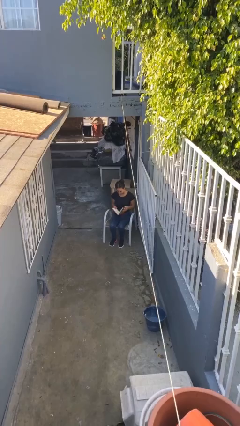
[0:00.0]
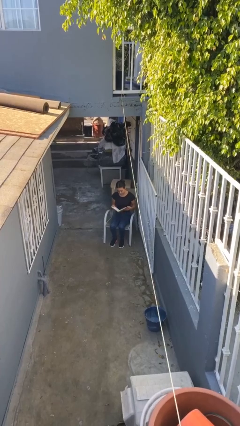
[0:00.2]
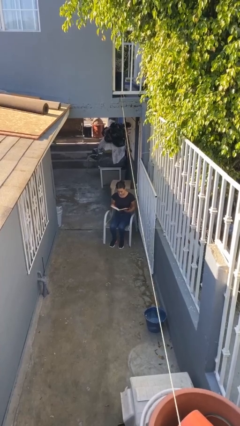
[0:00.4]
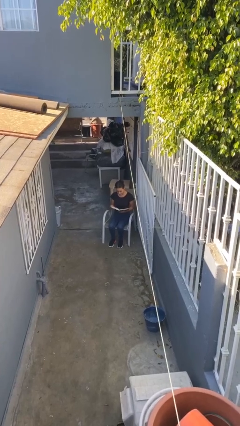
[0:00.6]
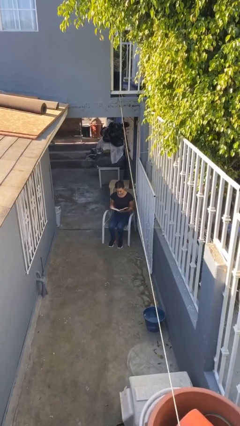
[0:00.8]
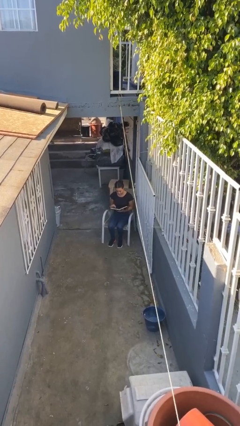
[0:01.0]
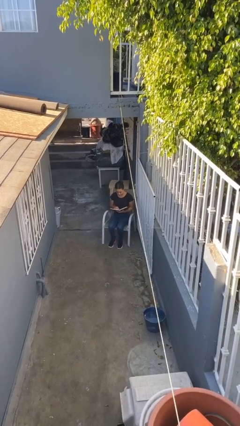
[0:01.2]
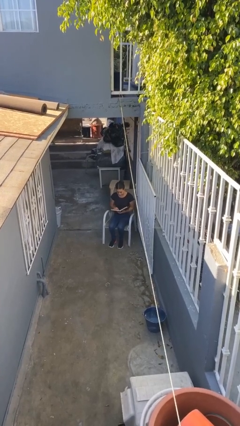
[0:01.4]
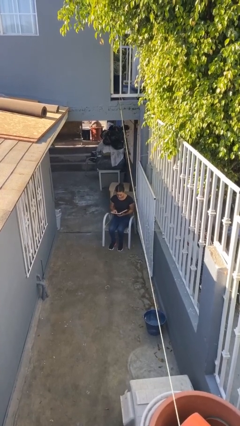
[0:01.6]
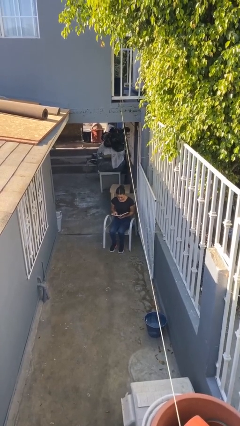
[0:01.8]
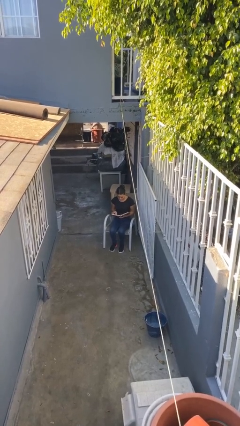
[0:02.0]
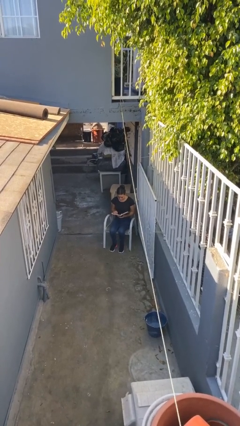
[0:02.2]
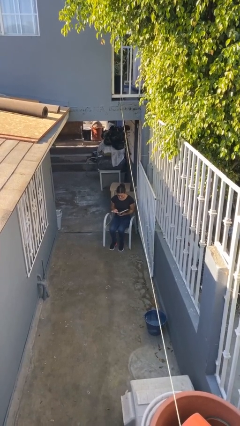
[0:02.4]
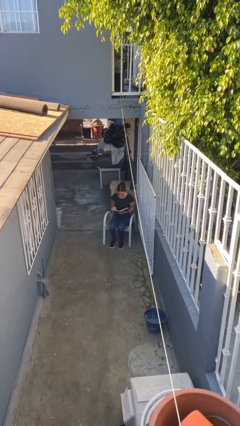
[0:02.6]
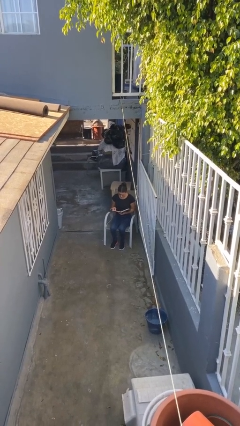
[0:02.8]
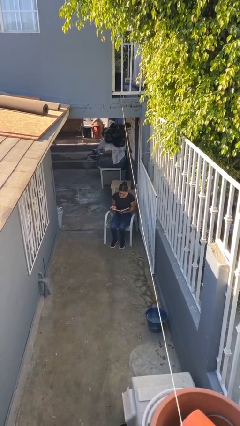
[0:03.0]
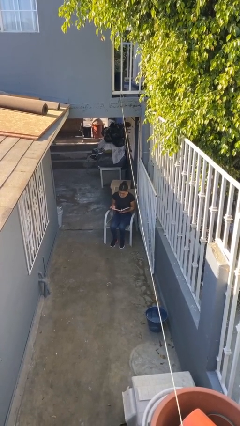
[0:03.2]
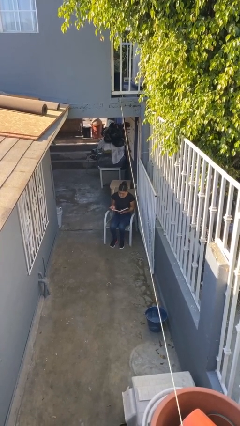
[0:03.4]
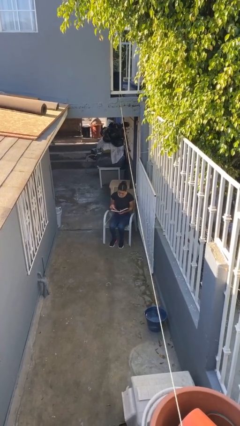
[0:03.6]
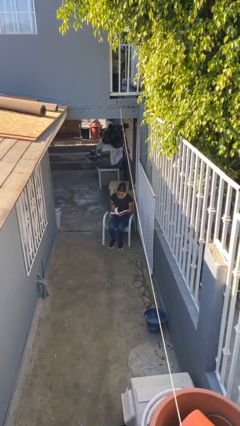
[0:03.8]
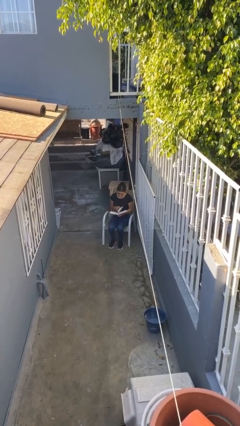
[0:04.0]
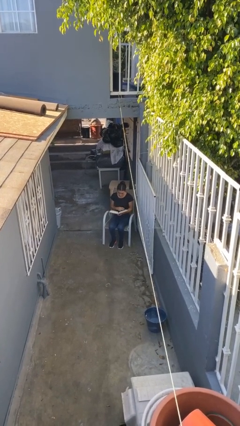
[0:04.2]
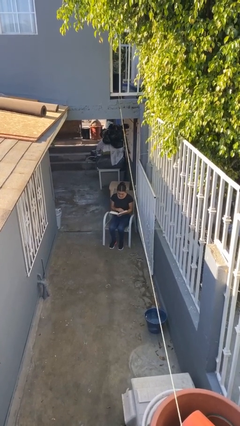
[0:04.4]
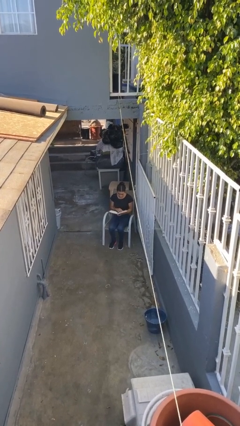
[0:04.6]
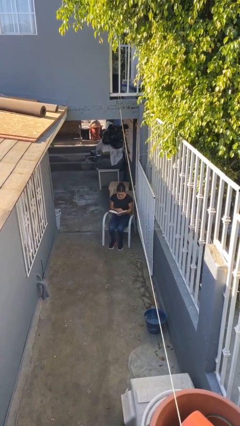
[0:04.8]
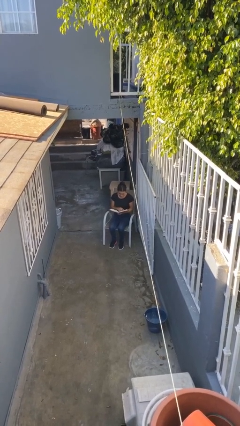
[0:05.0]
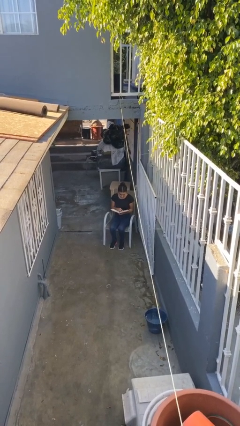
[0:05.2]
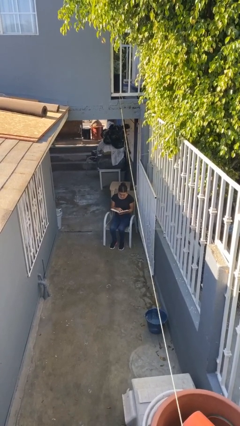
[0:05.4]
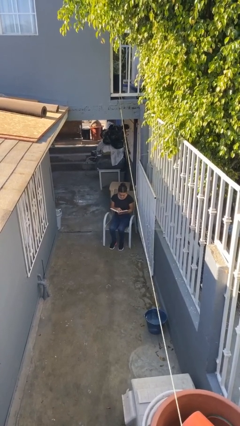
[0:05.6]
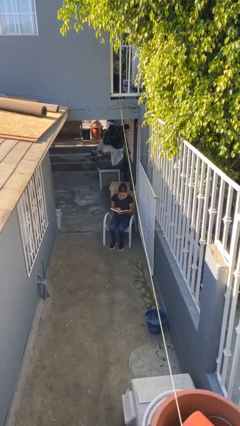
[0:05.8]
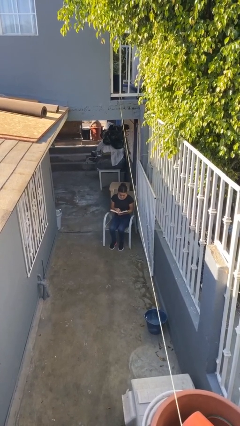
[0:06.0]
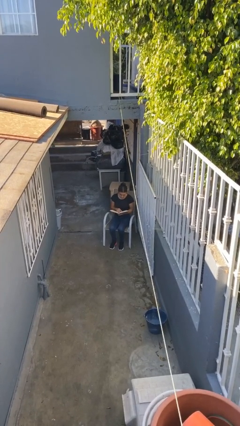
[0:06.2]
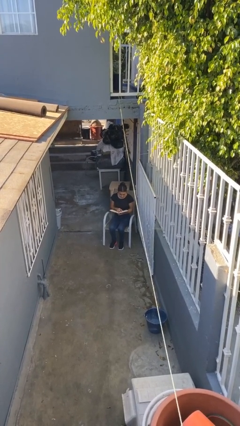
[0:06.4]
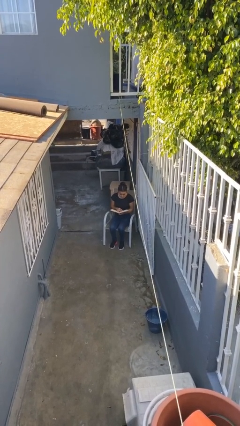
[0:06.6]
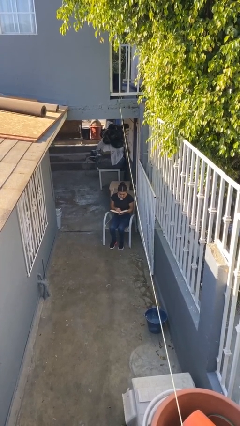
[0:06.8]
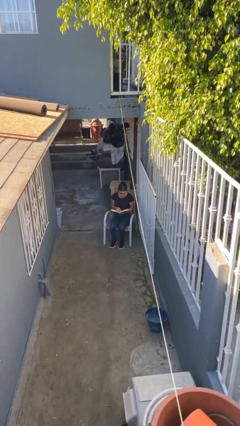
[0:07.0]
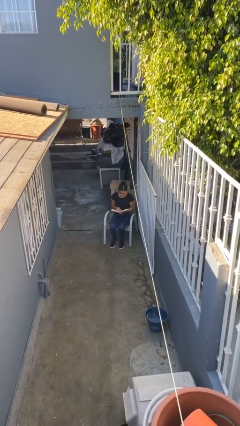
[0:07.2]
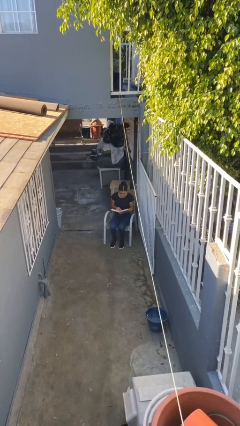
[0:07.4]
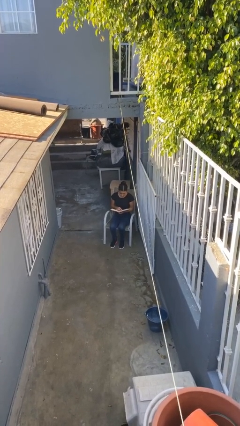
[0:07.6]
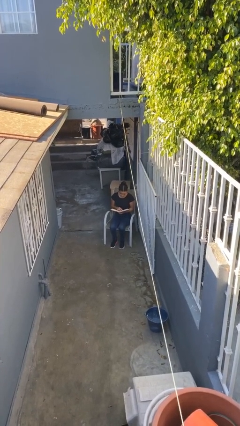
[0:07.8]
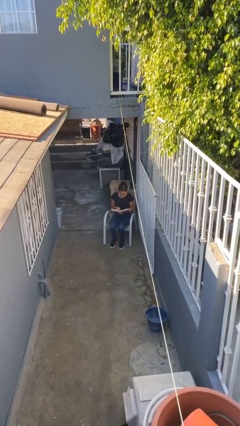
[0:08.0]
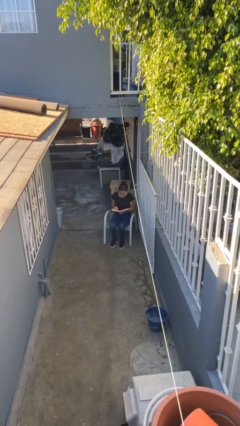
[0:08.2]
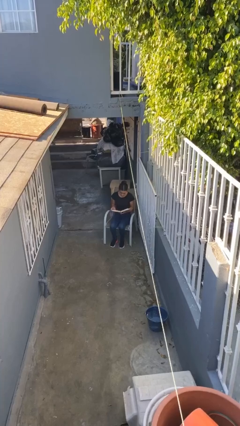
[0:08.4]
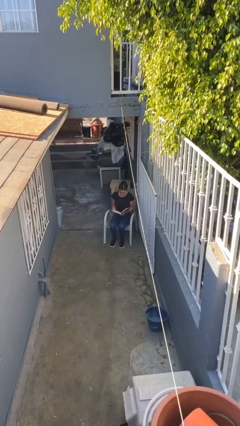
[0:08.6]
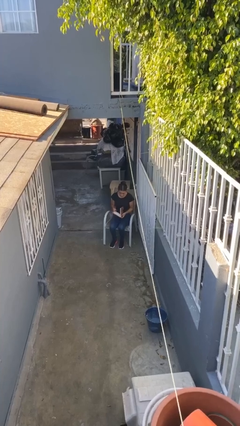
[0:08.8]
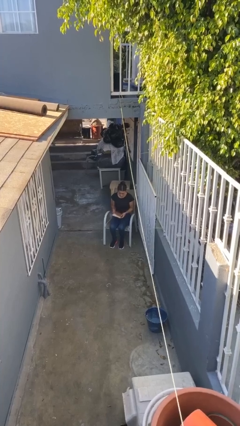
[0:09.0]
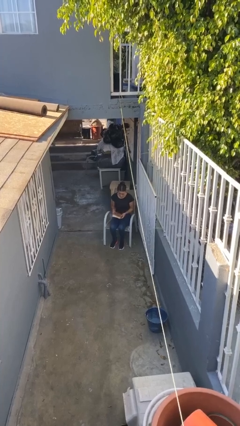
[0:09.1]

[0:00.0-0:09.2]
person reads document

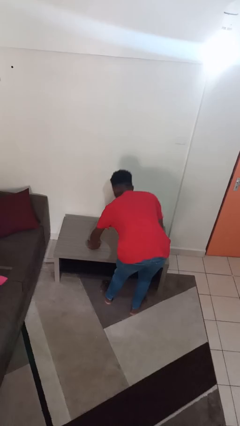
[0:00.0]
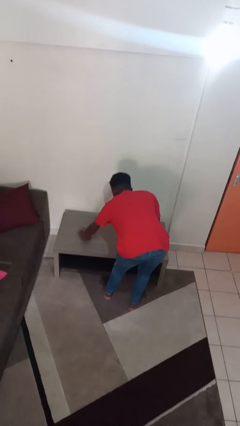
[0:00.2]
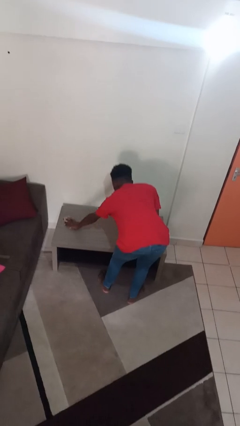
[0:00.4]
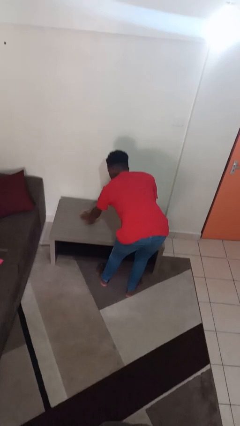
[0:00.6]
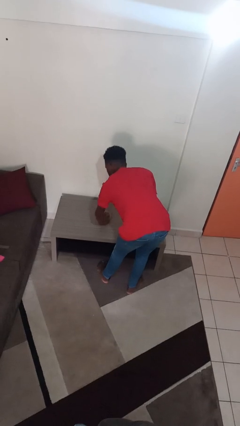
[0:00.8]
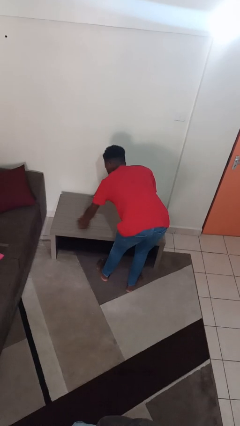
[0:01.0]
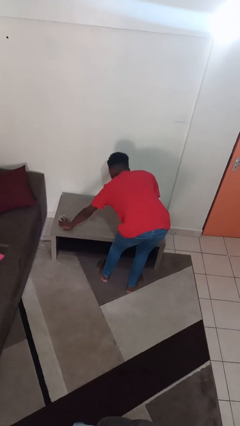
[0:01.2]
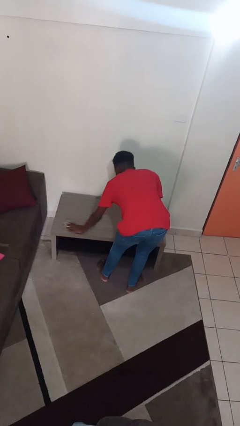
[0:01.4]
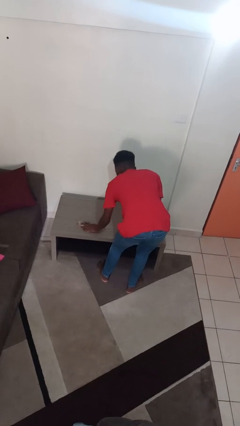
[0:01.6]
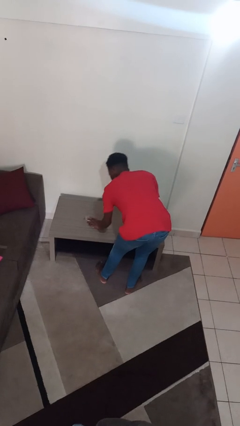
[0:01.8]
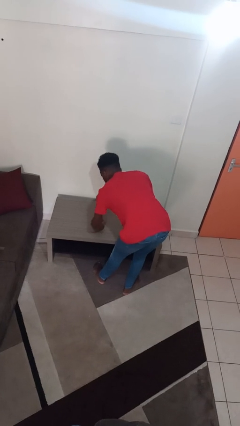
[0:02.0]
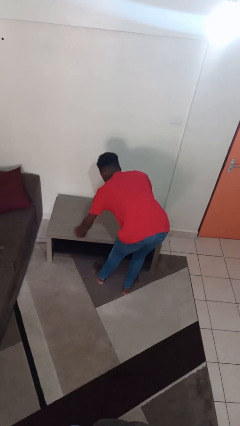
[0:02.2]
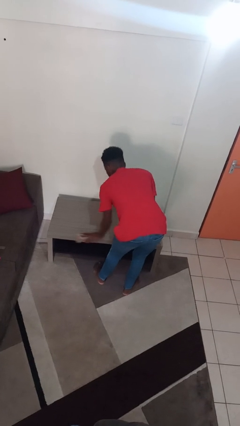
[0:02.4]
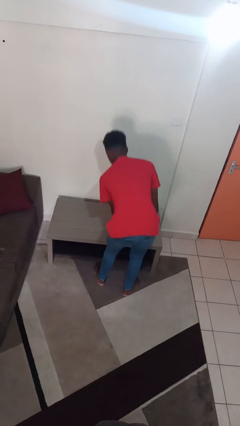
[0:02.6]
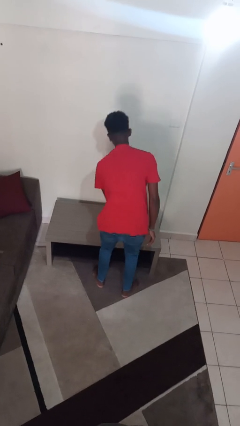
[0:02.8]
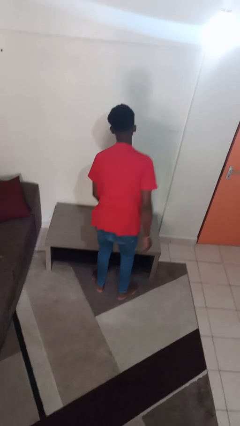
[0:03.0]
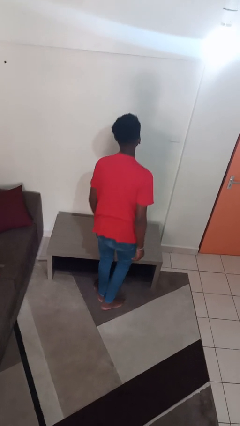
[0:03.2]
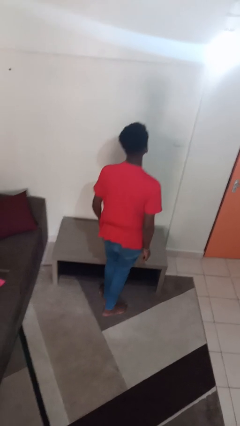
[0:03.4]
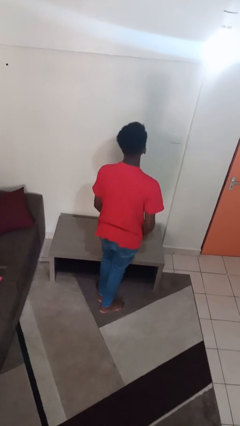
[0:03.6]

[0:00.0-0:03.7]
person cleans table with rag

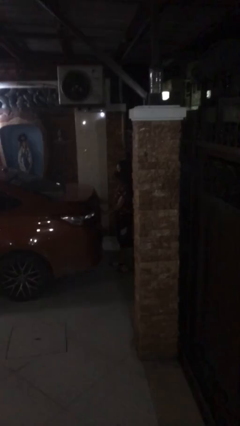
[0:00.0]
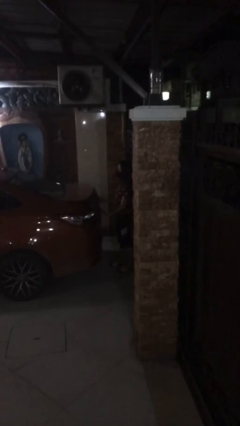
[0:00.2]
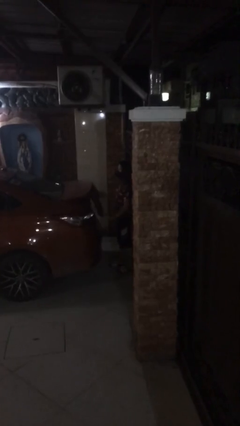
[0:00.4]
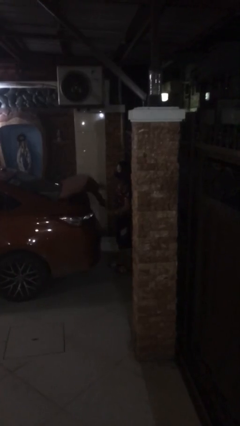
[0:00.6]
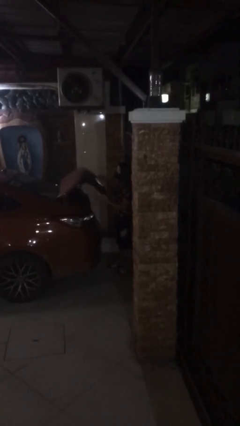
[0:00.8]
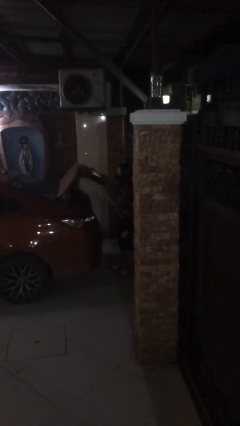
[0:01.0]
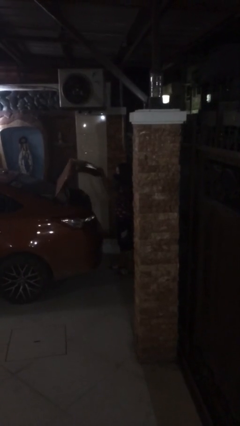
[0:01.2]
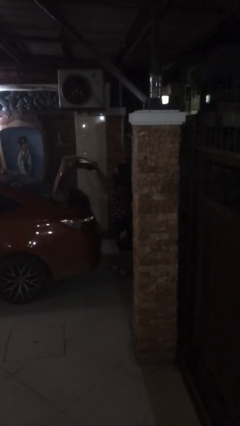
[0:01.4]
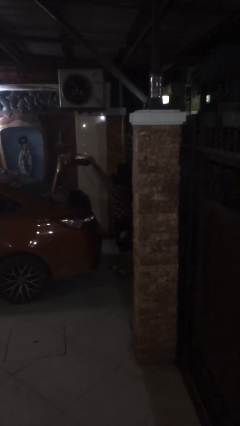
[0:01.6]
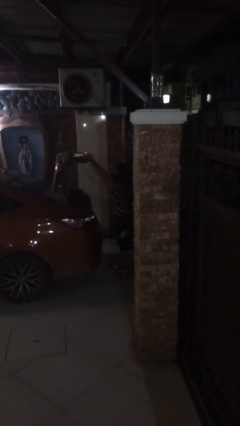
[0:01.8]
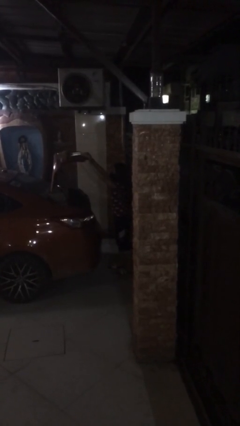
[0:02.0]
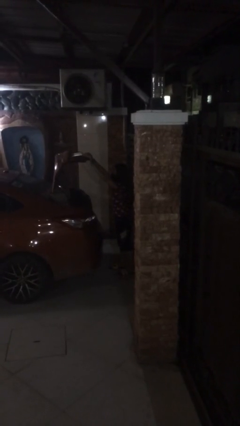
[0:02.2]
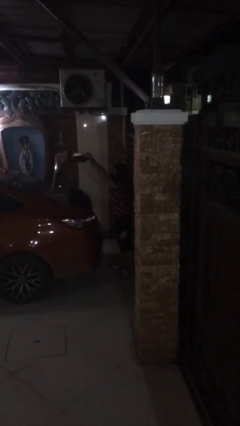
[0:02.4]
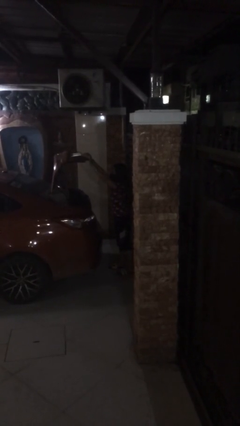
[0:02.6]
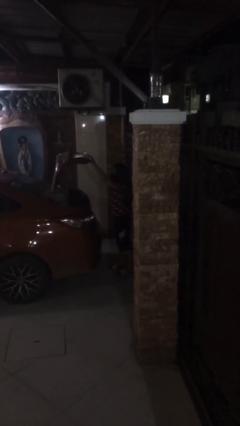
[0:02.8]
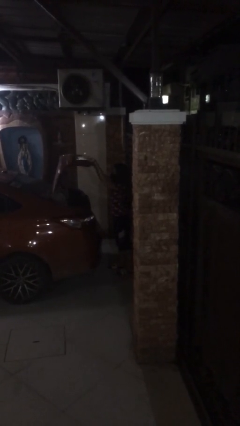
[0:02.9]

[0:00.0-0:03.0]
person opens car trunk

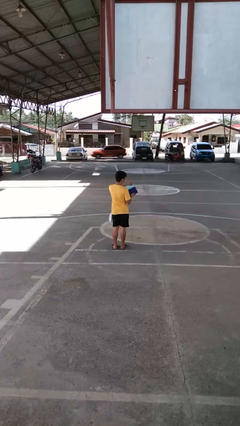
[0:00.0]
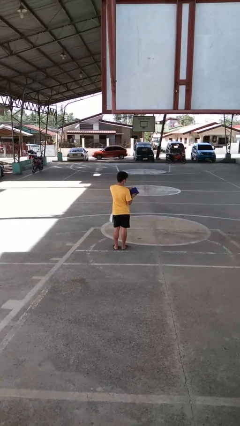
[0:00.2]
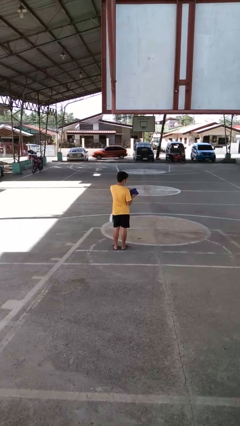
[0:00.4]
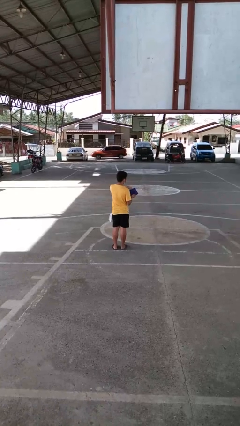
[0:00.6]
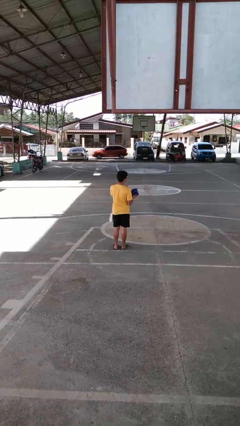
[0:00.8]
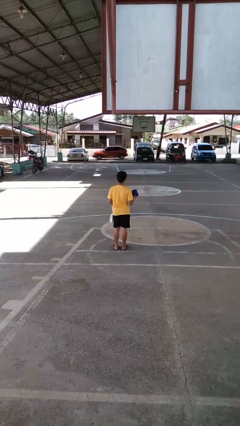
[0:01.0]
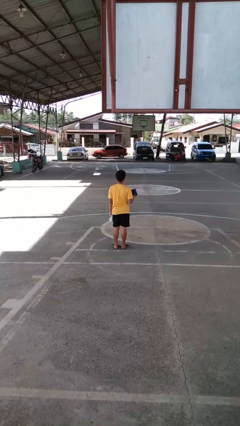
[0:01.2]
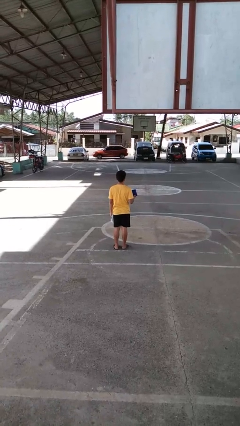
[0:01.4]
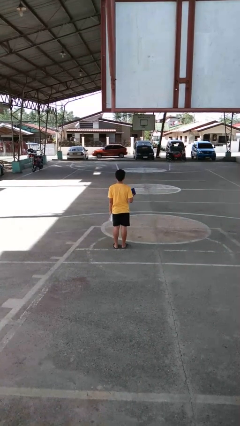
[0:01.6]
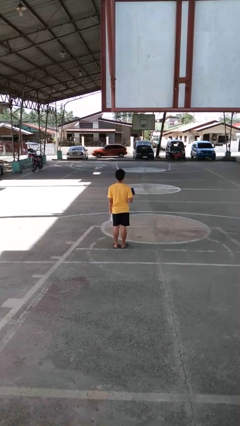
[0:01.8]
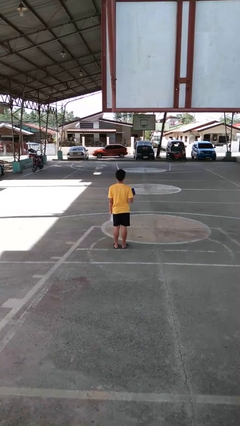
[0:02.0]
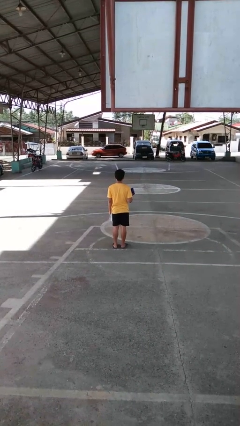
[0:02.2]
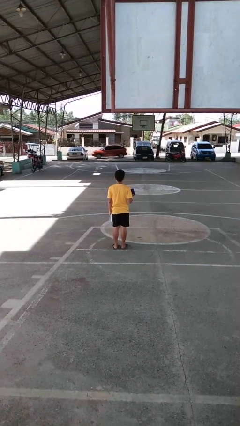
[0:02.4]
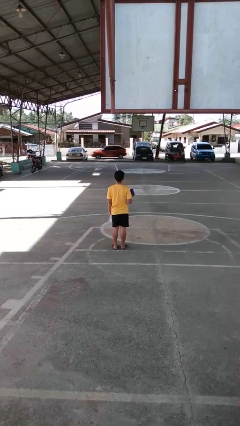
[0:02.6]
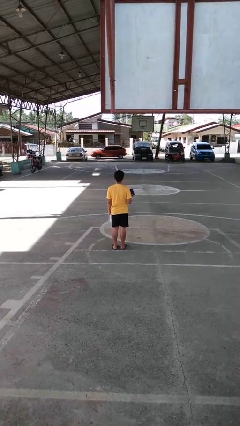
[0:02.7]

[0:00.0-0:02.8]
person puts on glasses
